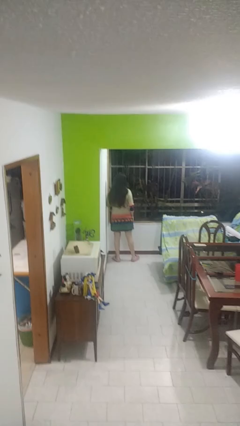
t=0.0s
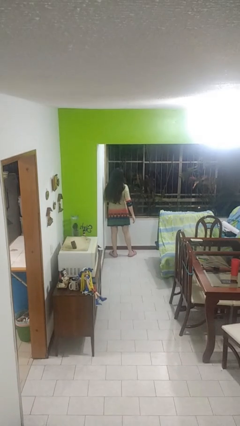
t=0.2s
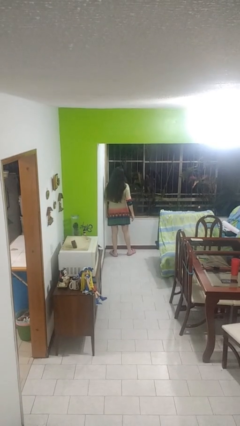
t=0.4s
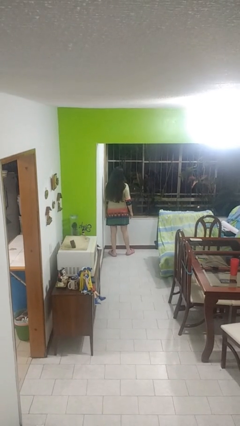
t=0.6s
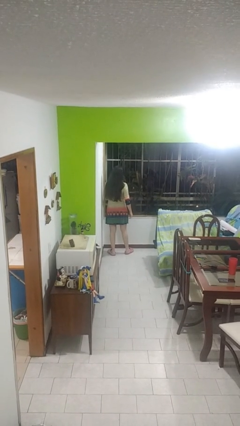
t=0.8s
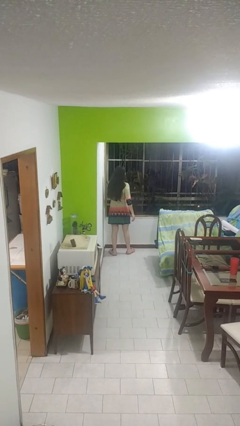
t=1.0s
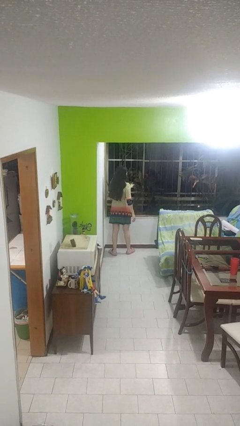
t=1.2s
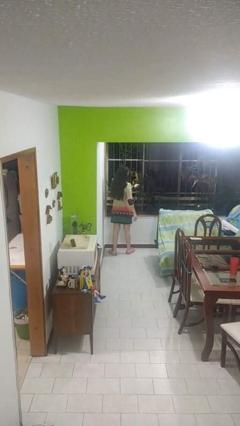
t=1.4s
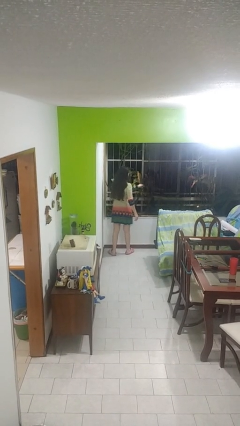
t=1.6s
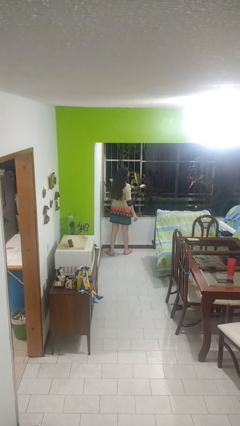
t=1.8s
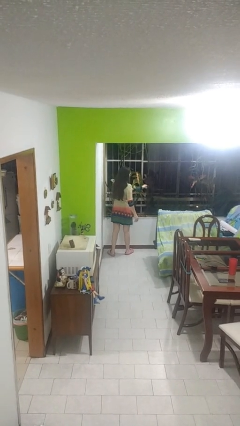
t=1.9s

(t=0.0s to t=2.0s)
person opens home window

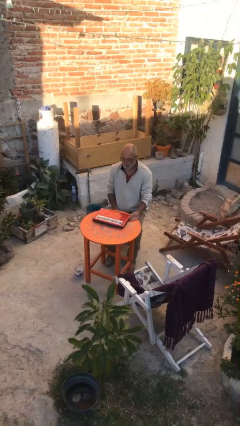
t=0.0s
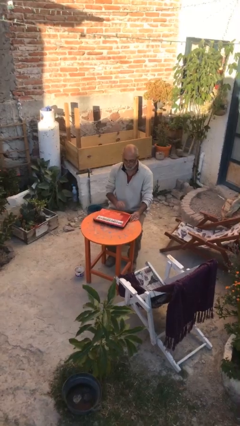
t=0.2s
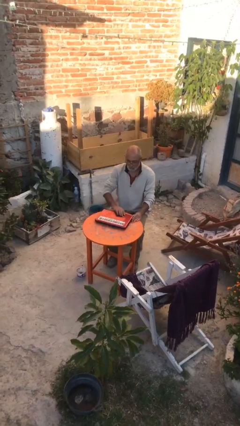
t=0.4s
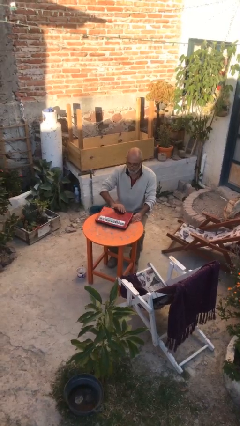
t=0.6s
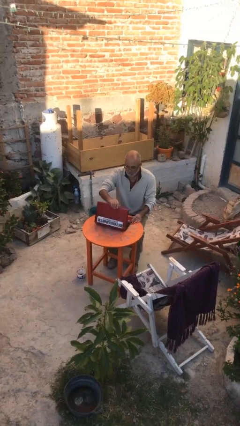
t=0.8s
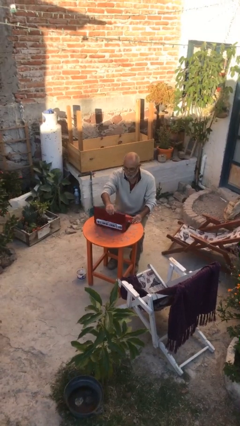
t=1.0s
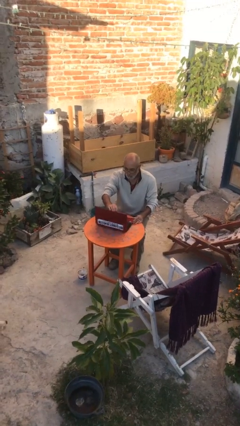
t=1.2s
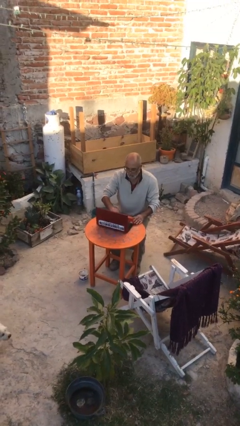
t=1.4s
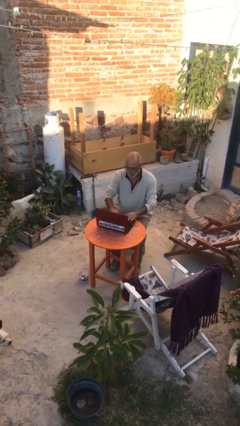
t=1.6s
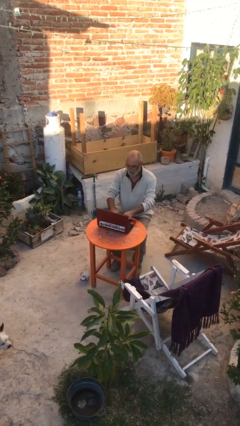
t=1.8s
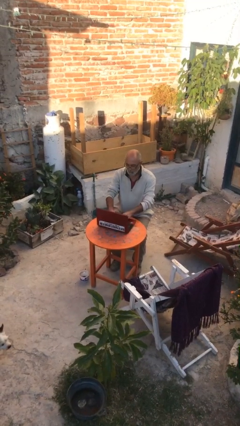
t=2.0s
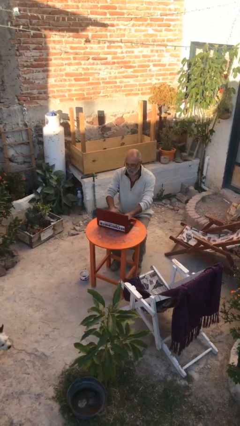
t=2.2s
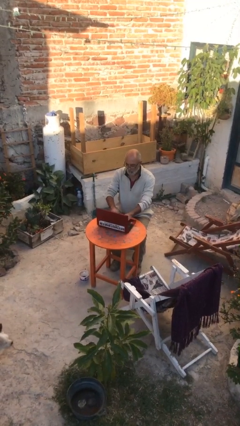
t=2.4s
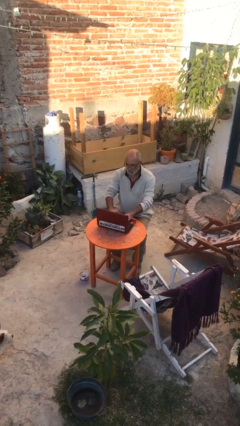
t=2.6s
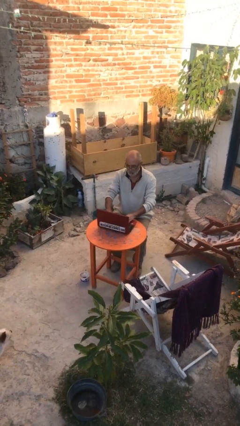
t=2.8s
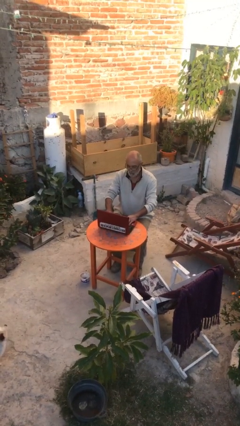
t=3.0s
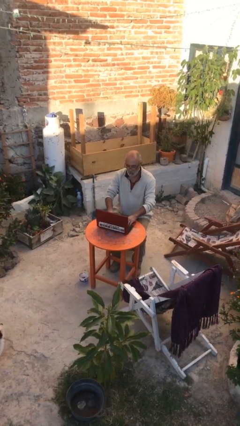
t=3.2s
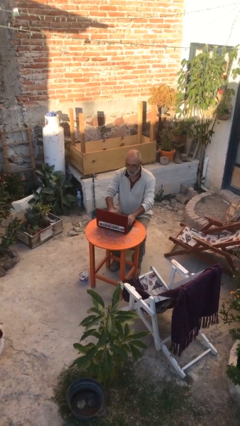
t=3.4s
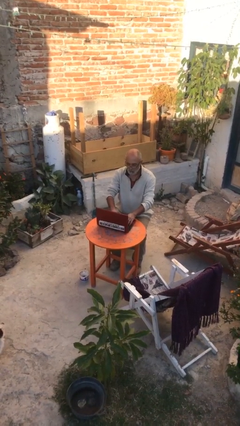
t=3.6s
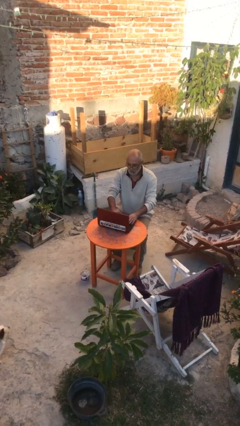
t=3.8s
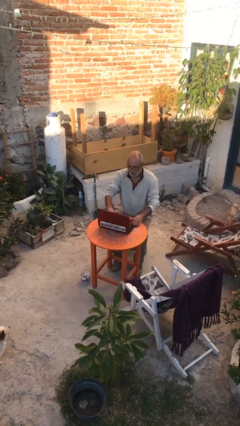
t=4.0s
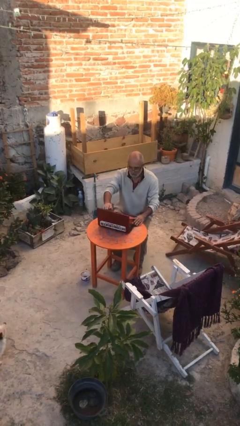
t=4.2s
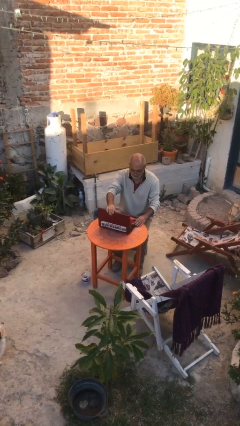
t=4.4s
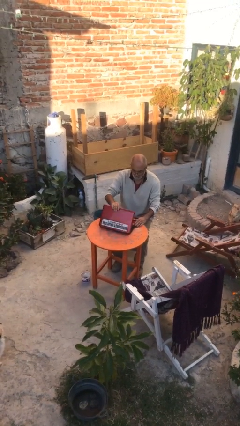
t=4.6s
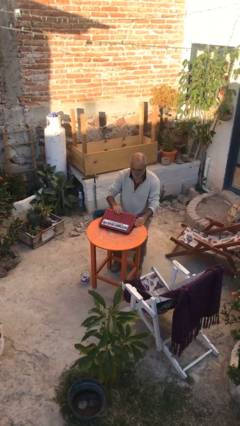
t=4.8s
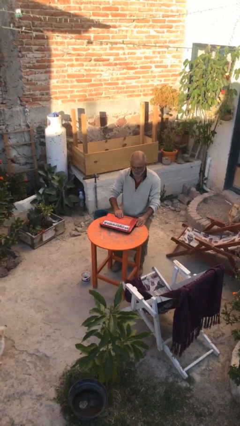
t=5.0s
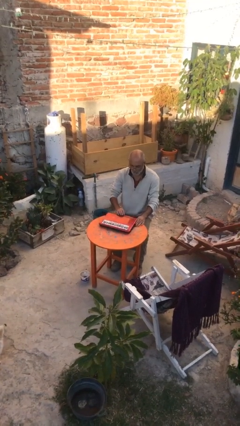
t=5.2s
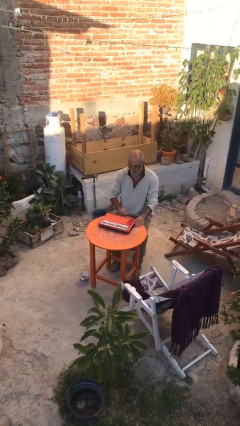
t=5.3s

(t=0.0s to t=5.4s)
person interacts with laptop

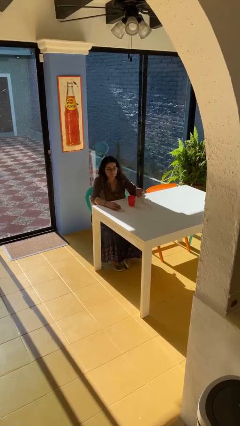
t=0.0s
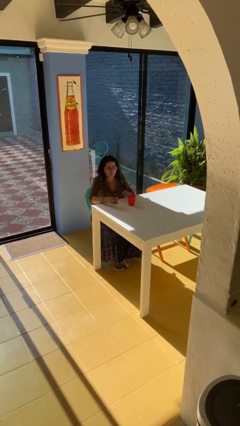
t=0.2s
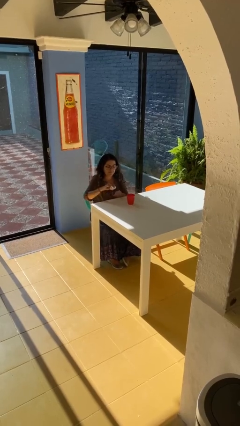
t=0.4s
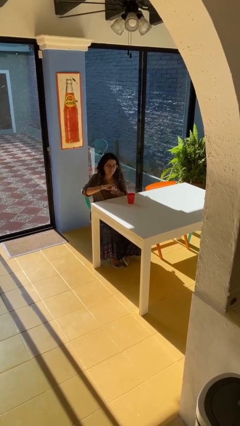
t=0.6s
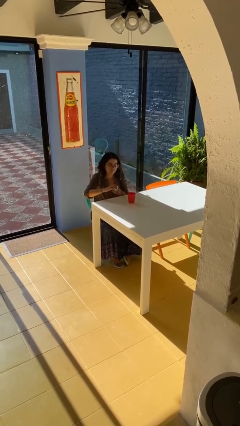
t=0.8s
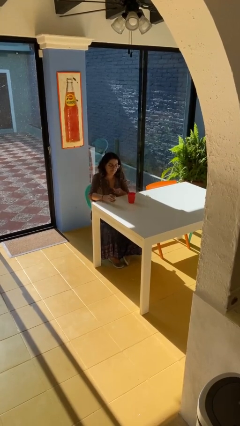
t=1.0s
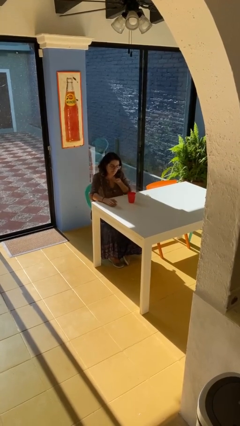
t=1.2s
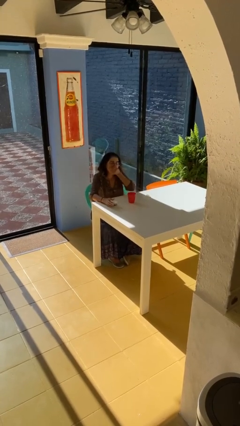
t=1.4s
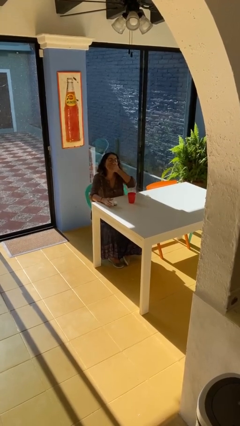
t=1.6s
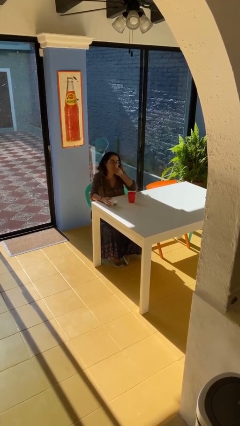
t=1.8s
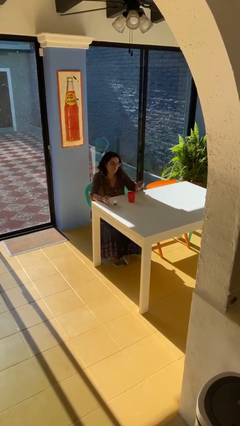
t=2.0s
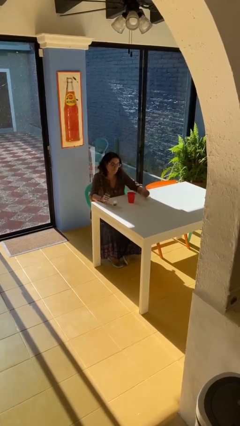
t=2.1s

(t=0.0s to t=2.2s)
person takes medicine pills

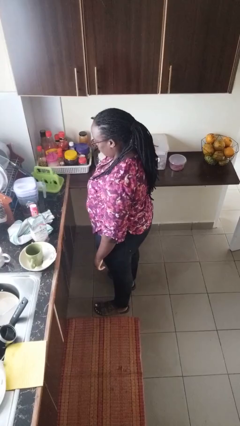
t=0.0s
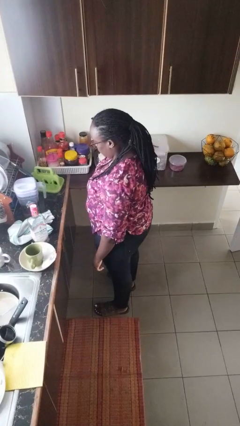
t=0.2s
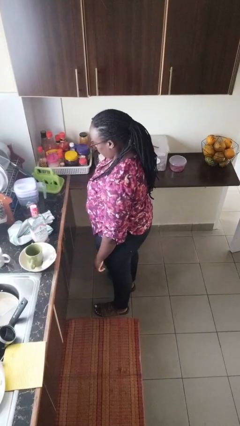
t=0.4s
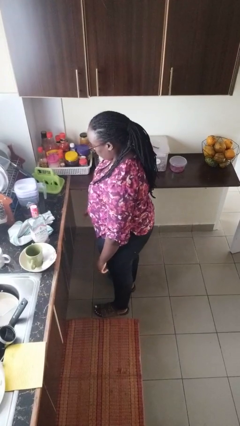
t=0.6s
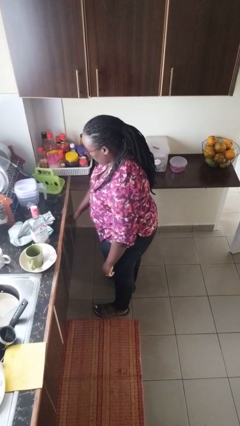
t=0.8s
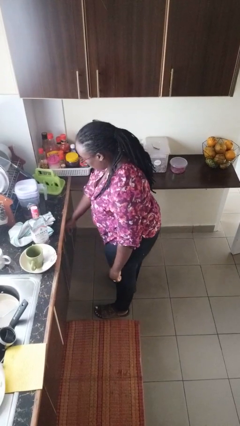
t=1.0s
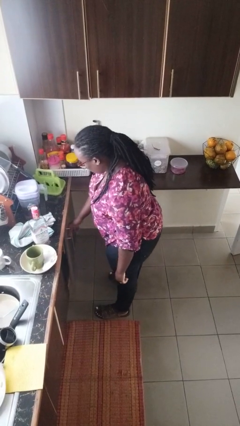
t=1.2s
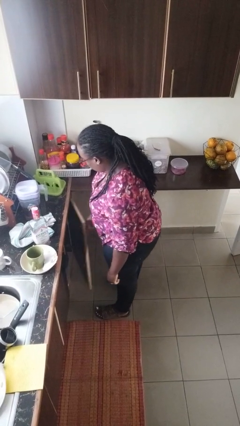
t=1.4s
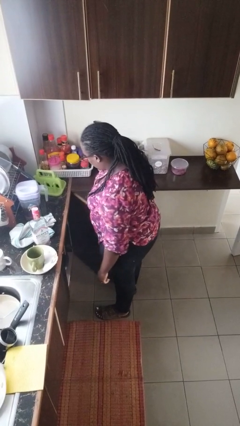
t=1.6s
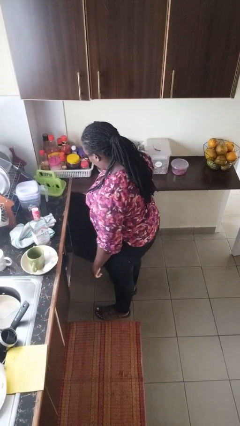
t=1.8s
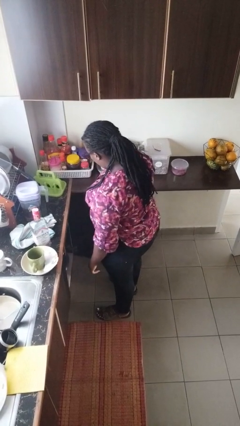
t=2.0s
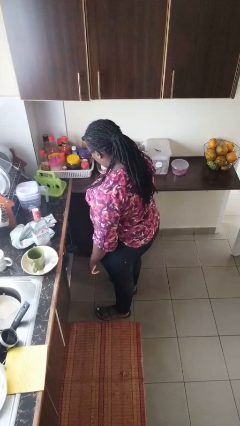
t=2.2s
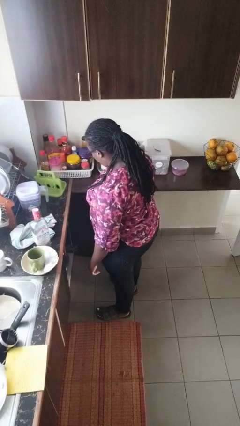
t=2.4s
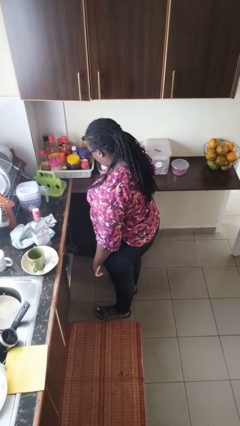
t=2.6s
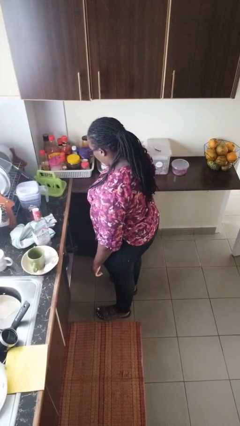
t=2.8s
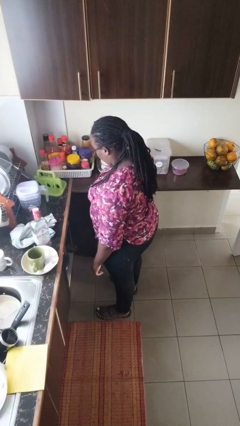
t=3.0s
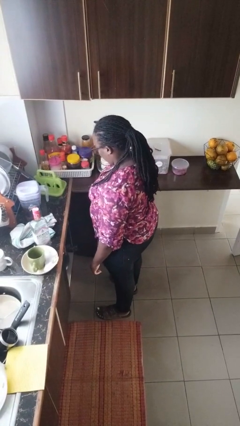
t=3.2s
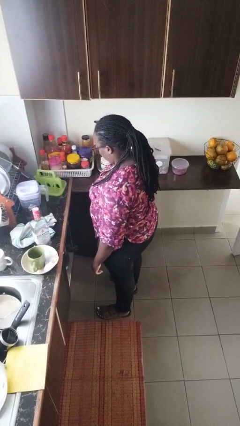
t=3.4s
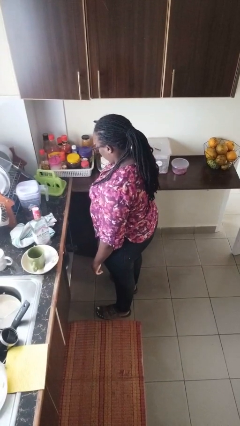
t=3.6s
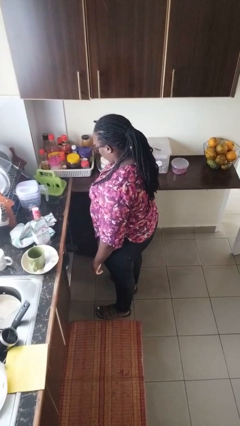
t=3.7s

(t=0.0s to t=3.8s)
person opens cabinet

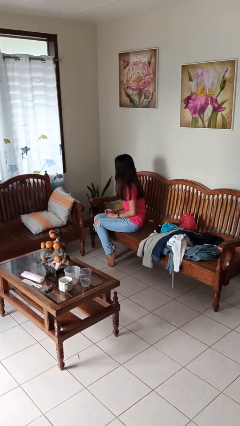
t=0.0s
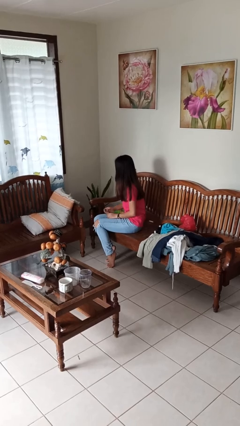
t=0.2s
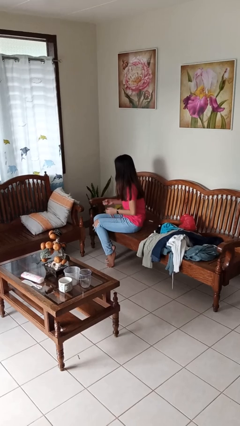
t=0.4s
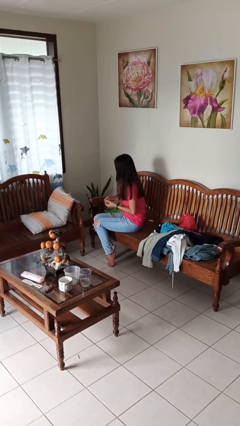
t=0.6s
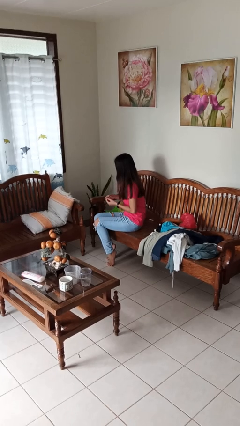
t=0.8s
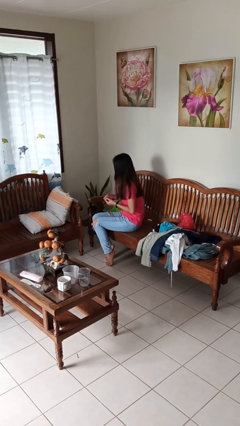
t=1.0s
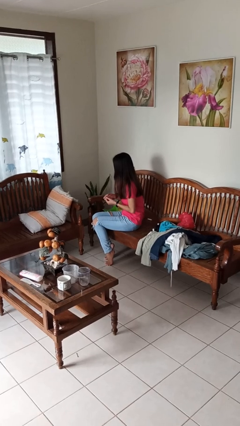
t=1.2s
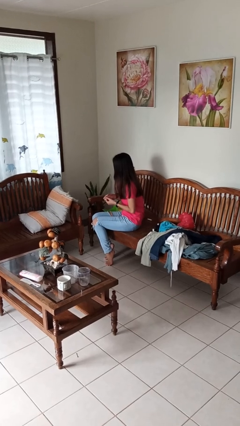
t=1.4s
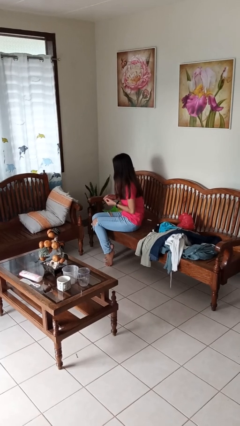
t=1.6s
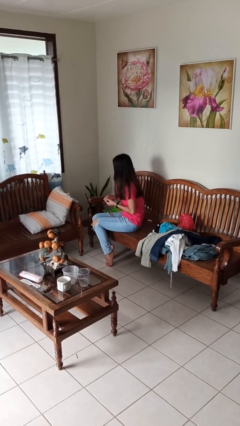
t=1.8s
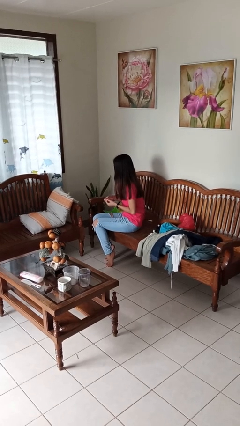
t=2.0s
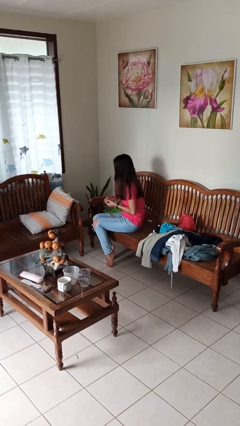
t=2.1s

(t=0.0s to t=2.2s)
person clips fingernails

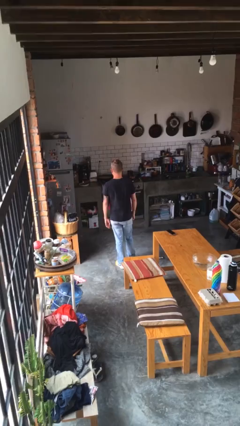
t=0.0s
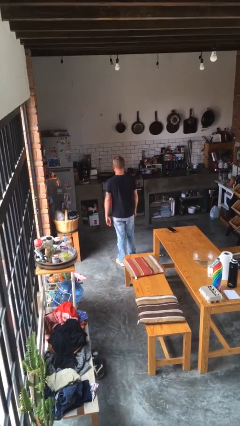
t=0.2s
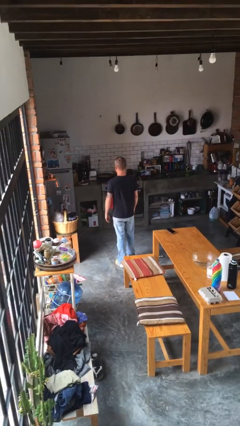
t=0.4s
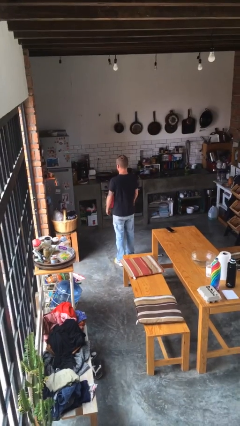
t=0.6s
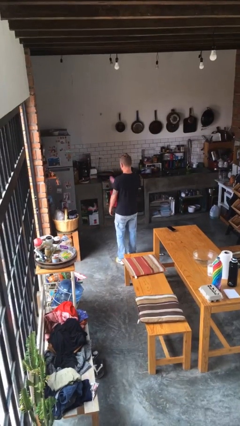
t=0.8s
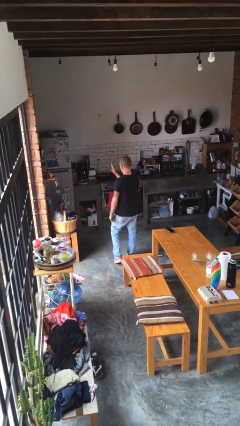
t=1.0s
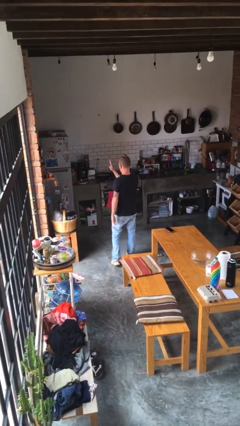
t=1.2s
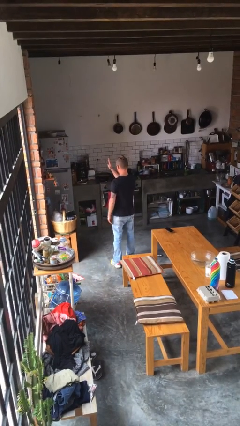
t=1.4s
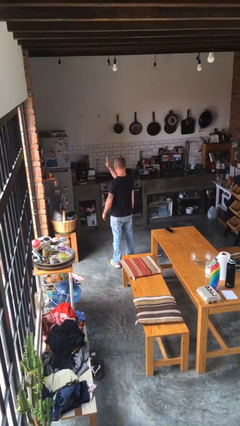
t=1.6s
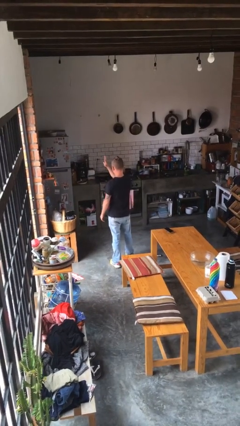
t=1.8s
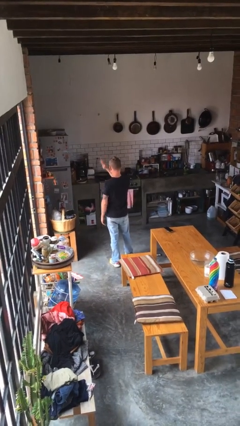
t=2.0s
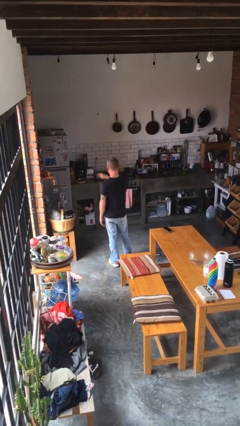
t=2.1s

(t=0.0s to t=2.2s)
person gestures number four
